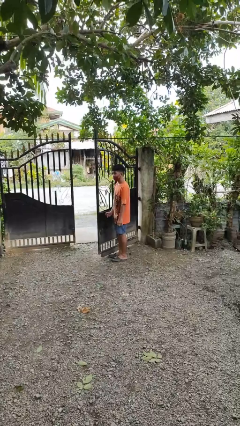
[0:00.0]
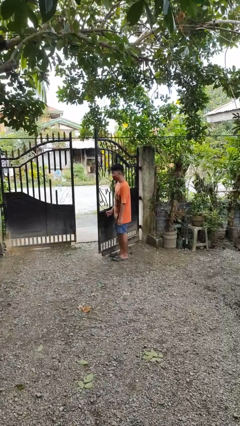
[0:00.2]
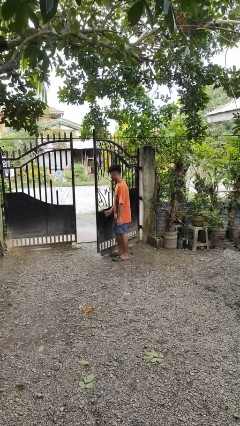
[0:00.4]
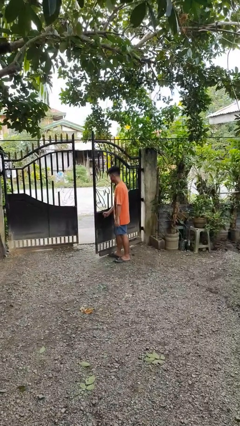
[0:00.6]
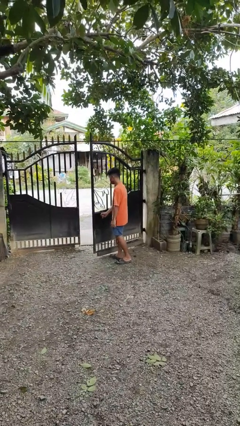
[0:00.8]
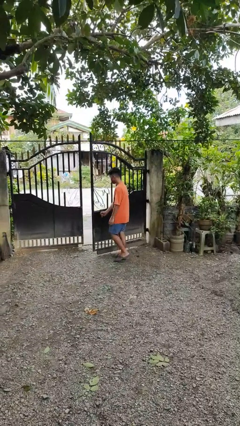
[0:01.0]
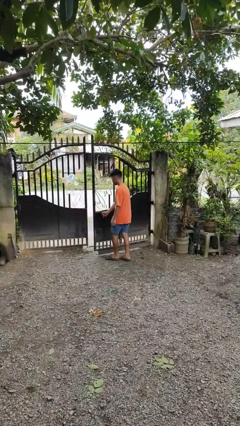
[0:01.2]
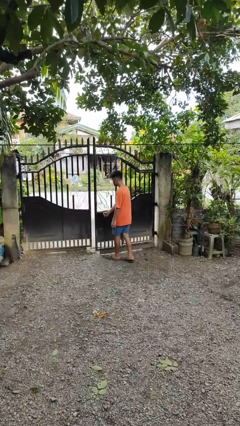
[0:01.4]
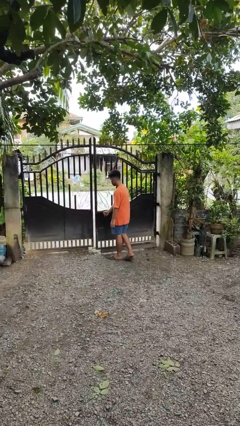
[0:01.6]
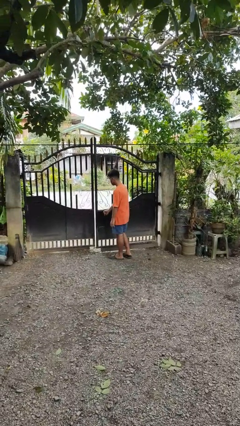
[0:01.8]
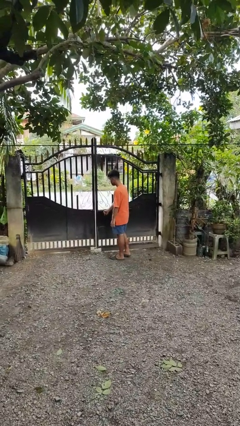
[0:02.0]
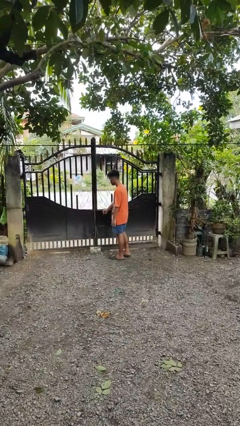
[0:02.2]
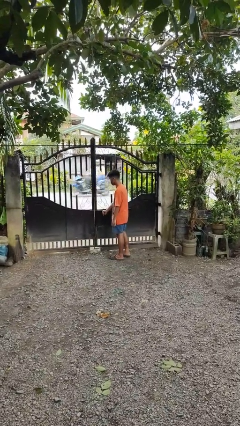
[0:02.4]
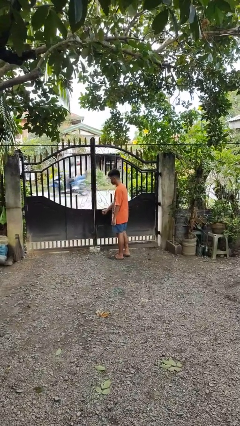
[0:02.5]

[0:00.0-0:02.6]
person closes gate

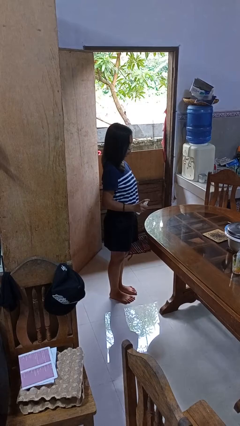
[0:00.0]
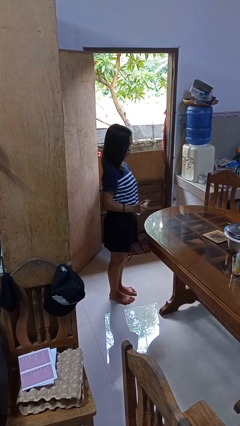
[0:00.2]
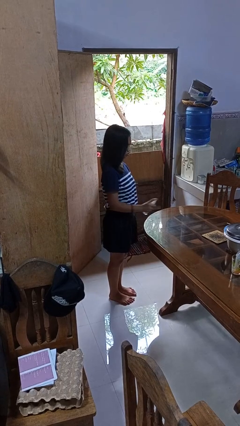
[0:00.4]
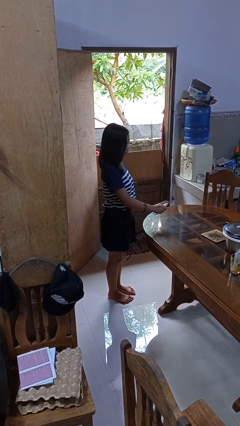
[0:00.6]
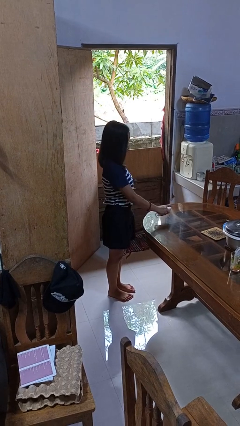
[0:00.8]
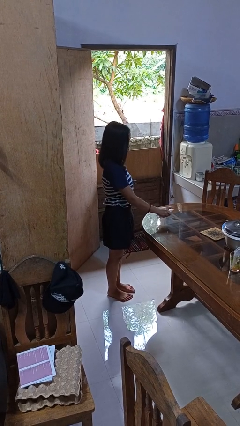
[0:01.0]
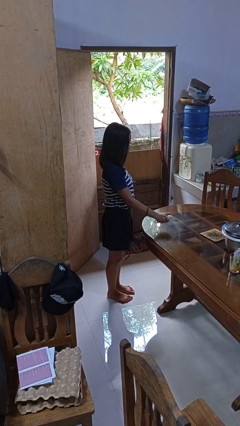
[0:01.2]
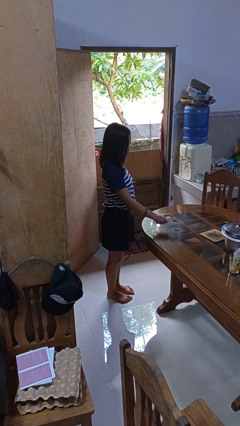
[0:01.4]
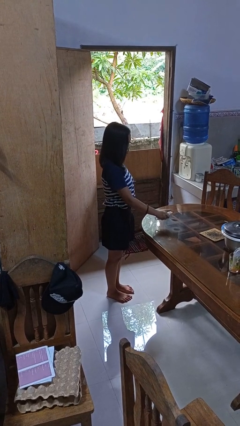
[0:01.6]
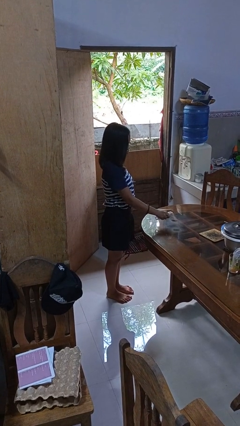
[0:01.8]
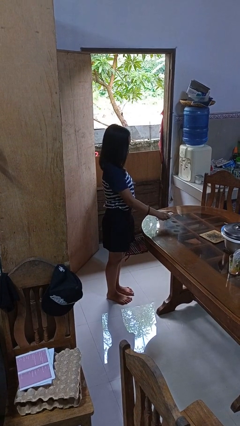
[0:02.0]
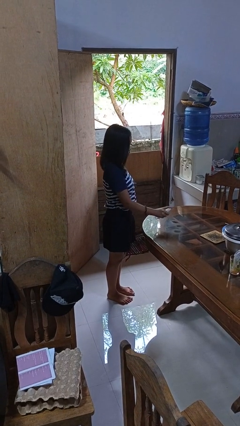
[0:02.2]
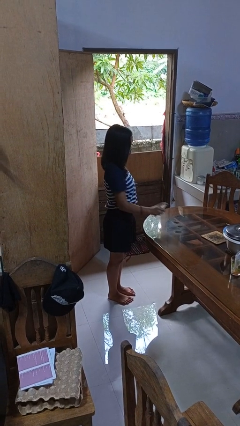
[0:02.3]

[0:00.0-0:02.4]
person sprays from bottle

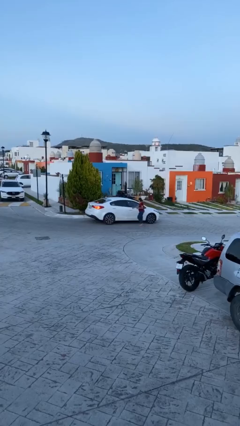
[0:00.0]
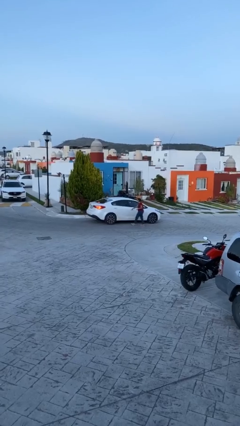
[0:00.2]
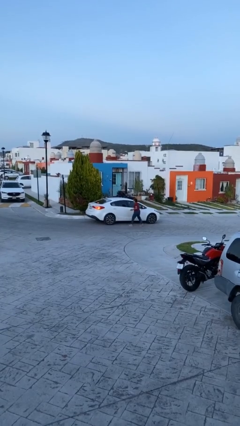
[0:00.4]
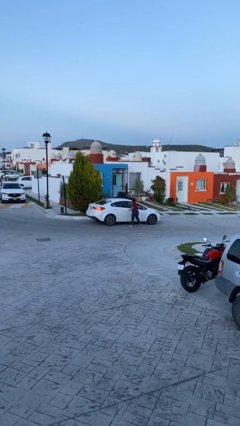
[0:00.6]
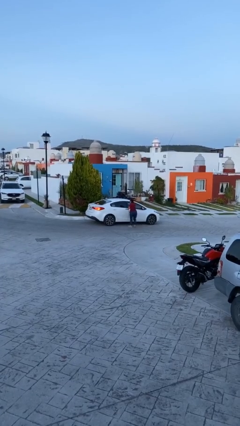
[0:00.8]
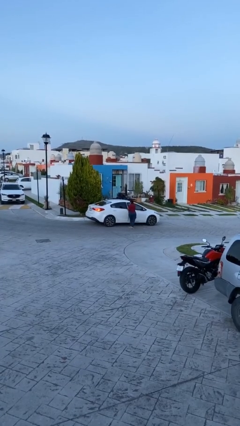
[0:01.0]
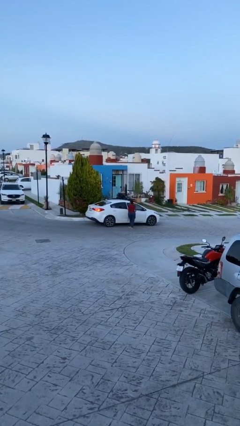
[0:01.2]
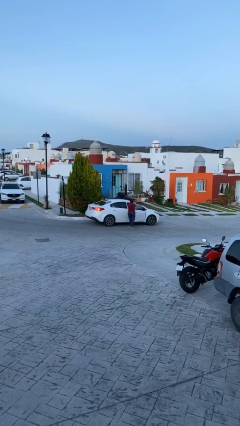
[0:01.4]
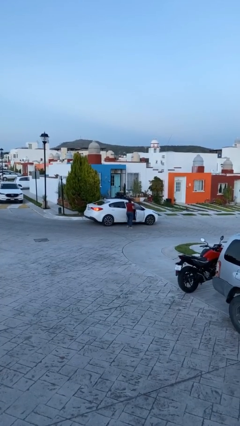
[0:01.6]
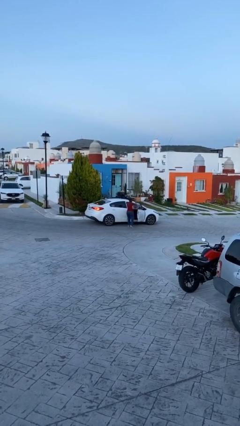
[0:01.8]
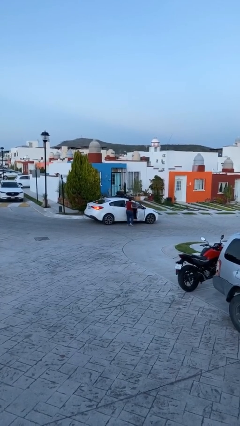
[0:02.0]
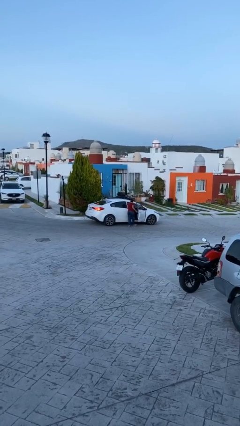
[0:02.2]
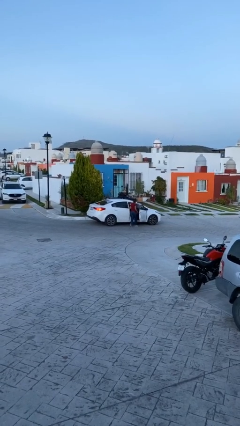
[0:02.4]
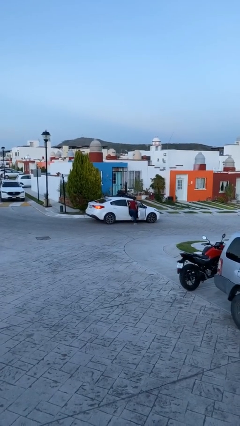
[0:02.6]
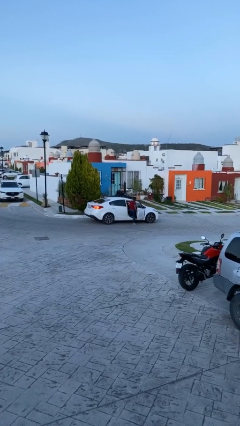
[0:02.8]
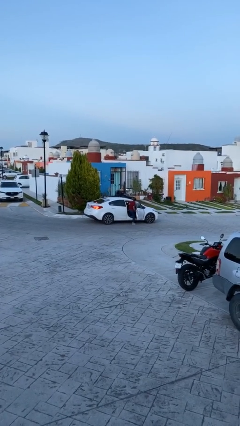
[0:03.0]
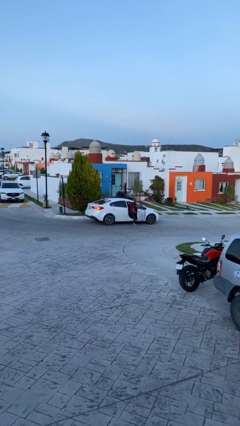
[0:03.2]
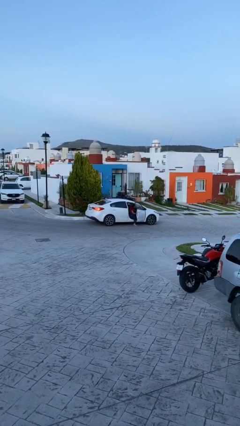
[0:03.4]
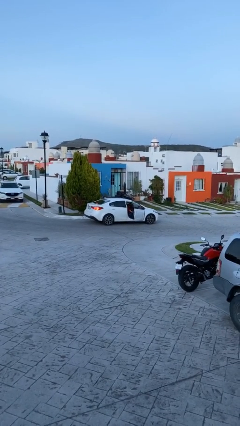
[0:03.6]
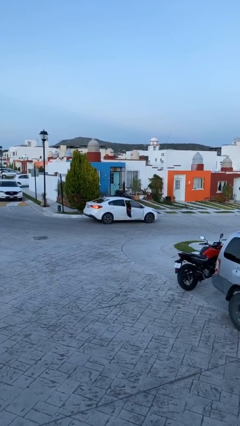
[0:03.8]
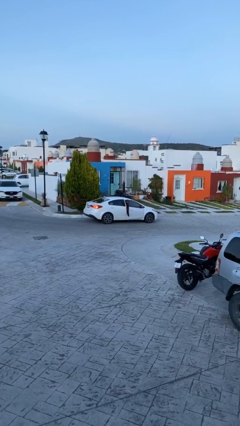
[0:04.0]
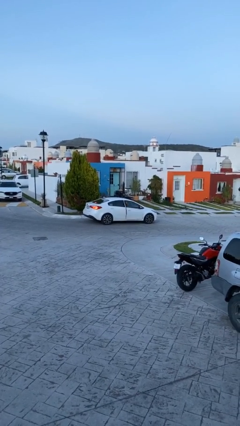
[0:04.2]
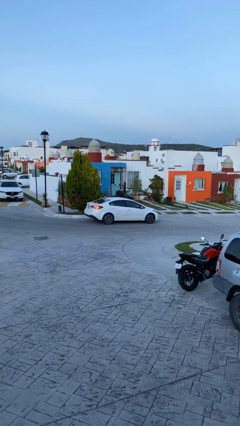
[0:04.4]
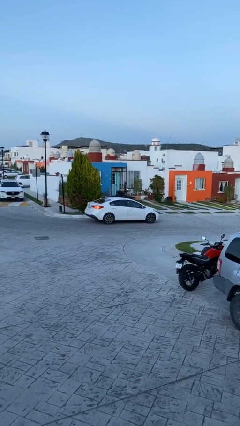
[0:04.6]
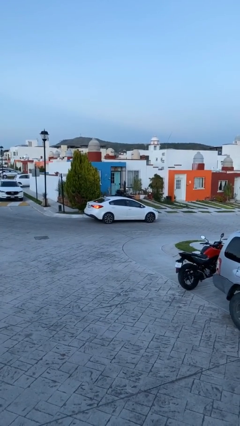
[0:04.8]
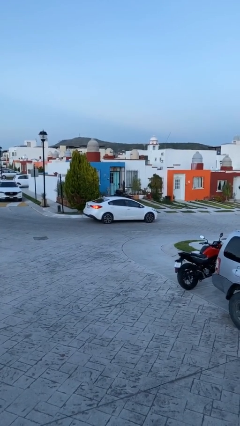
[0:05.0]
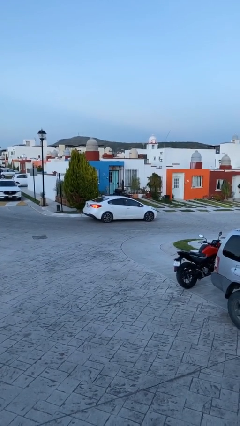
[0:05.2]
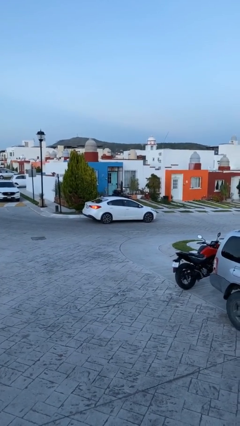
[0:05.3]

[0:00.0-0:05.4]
car picks up person

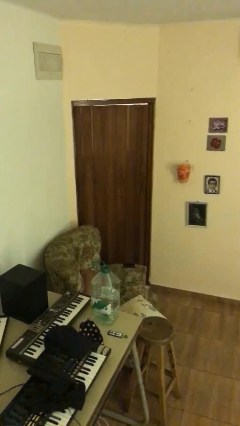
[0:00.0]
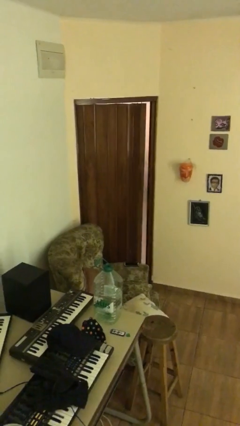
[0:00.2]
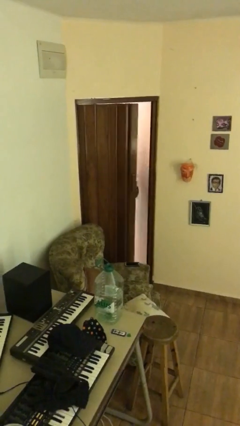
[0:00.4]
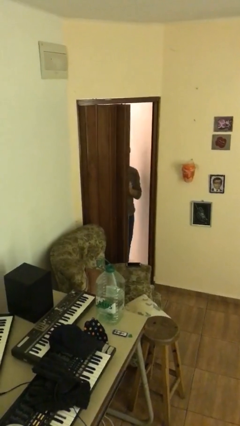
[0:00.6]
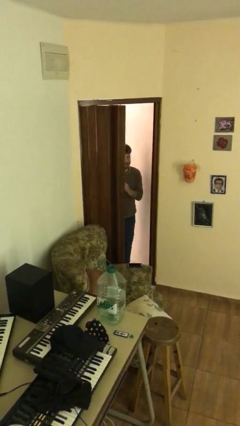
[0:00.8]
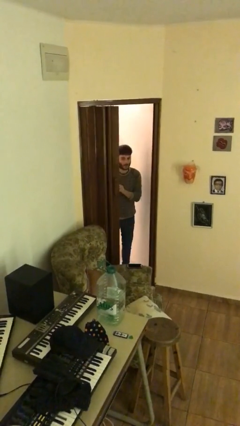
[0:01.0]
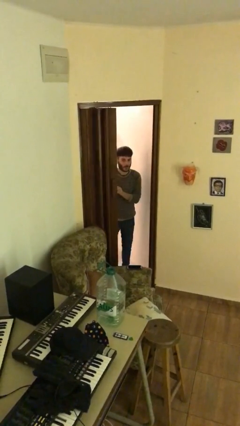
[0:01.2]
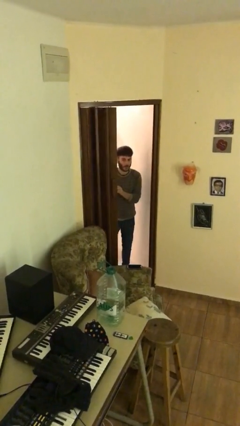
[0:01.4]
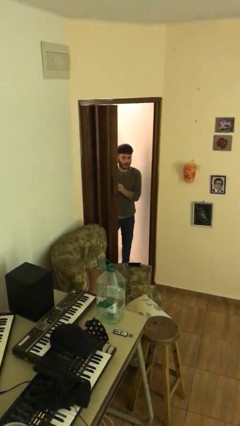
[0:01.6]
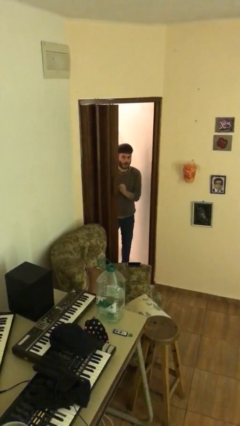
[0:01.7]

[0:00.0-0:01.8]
person opens sliding door

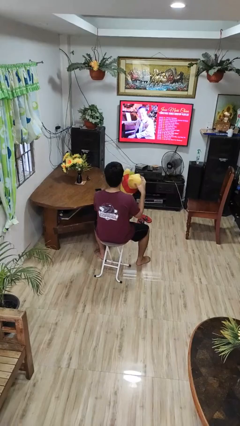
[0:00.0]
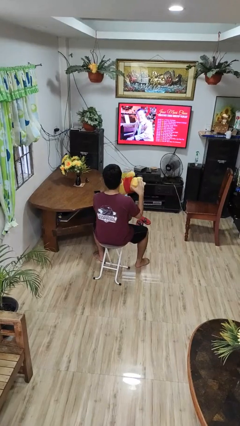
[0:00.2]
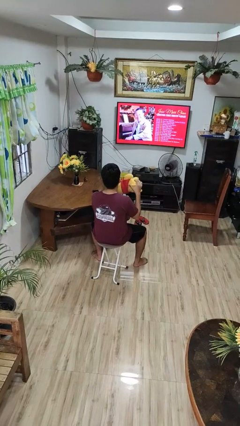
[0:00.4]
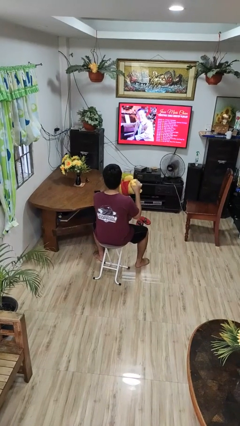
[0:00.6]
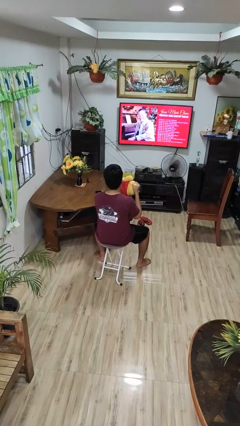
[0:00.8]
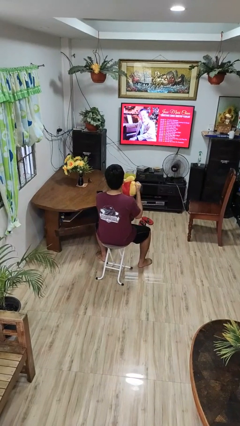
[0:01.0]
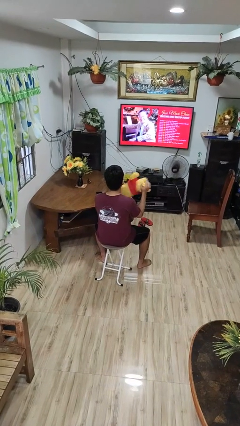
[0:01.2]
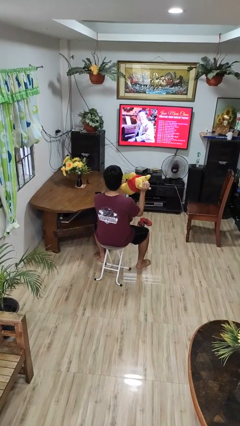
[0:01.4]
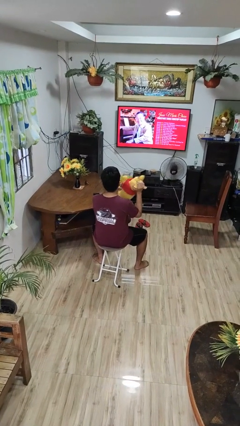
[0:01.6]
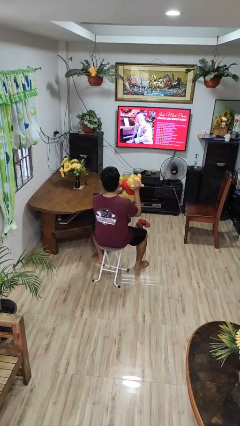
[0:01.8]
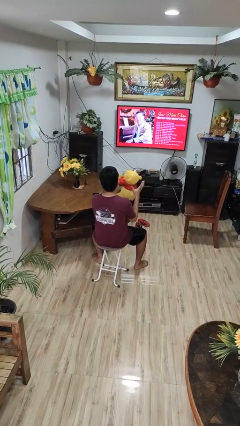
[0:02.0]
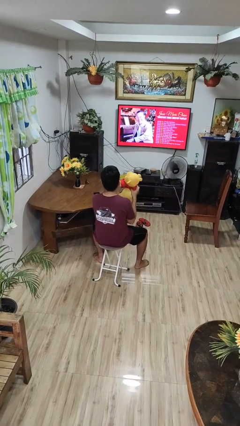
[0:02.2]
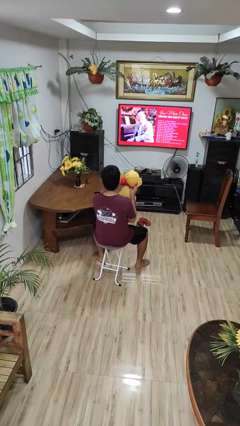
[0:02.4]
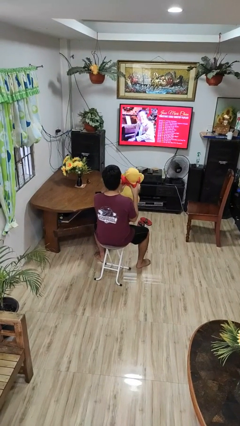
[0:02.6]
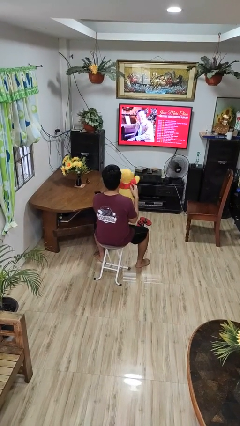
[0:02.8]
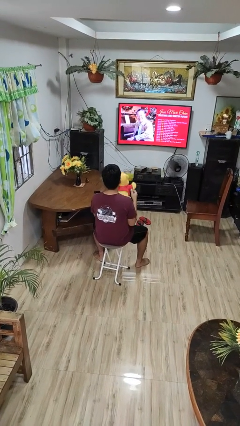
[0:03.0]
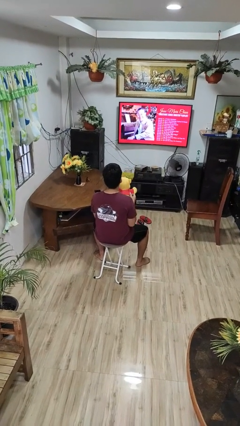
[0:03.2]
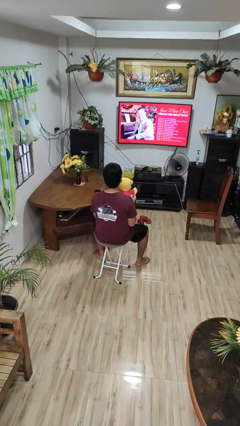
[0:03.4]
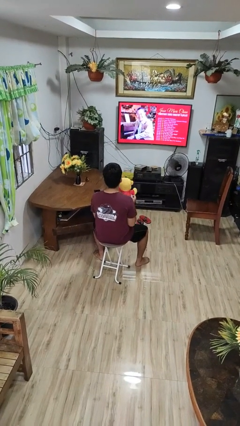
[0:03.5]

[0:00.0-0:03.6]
person squeezes object

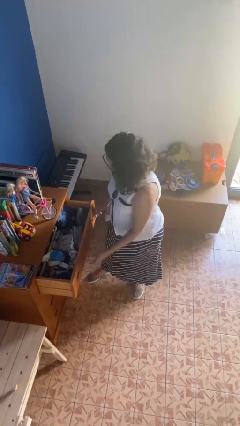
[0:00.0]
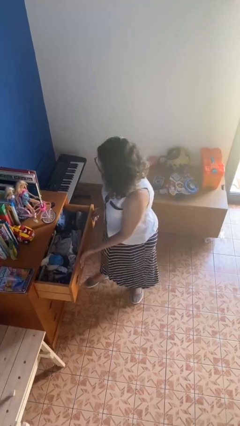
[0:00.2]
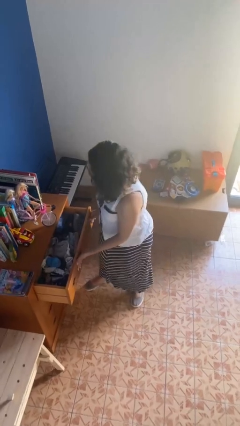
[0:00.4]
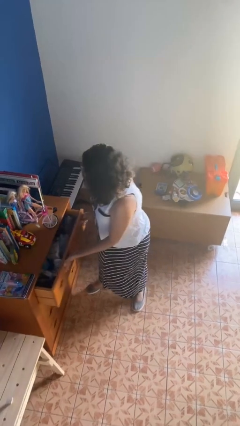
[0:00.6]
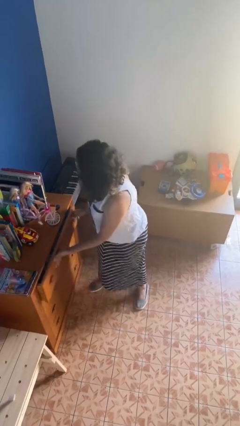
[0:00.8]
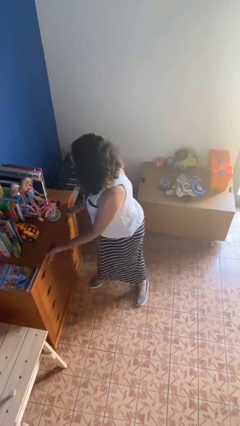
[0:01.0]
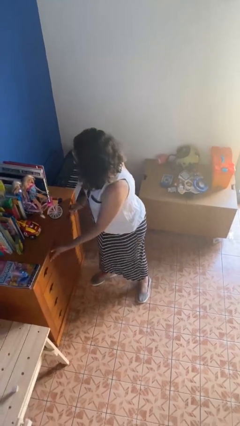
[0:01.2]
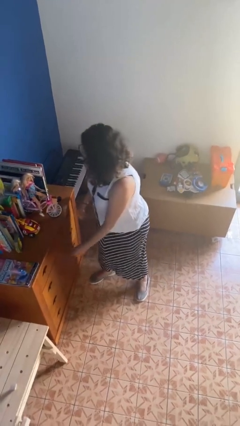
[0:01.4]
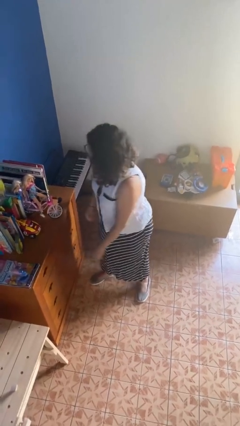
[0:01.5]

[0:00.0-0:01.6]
person closes dresser drawer
